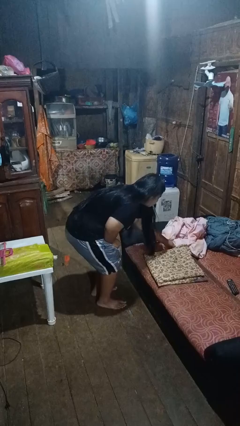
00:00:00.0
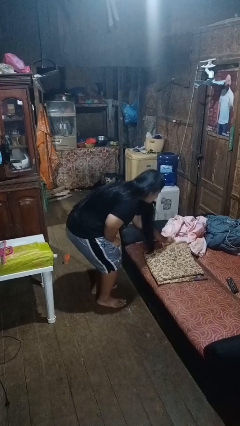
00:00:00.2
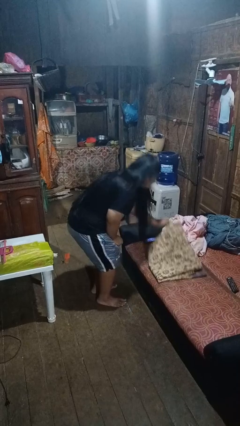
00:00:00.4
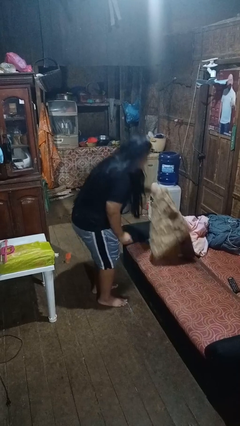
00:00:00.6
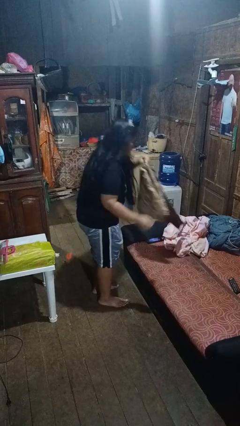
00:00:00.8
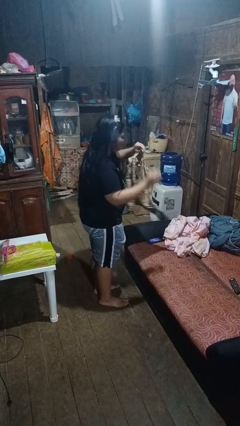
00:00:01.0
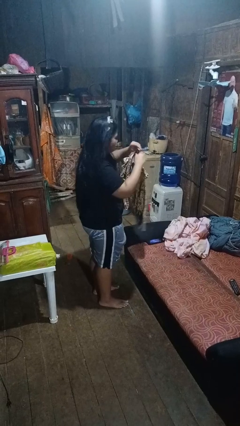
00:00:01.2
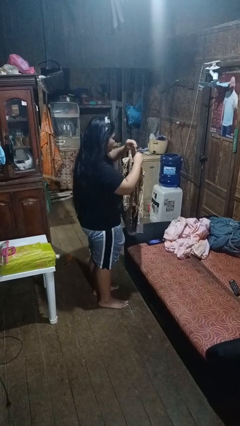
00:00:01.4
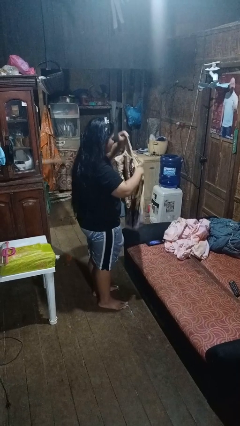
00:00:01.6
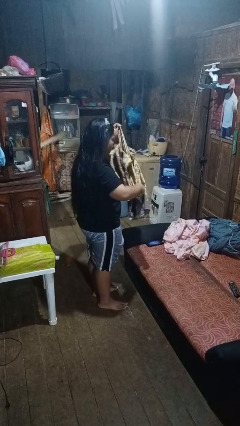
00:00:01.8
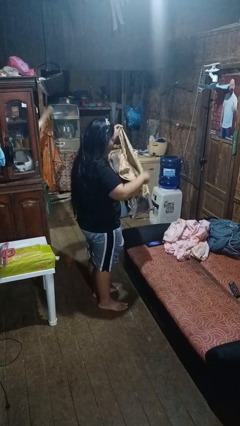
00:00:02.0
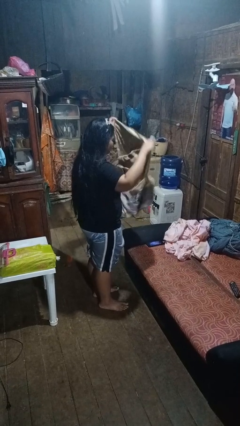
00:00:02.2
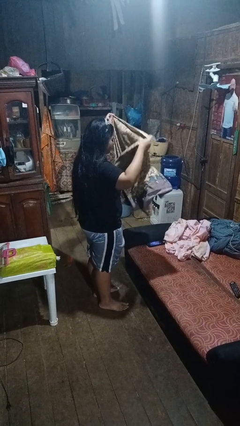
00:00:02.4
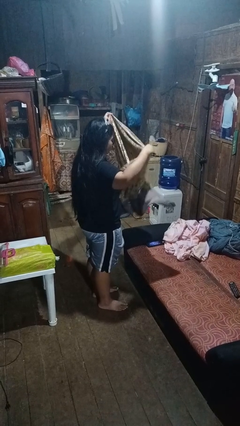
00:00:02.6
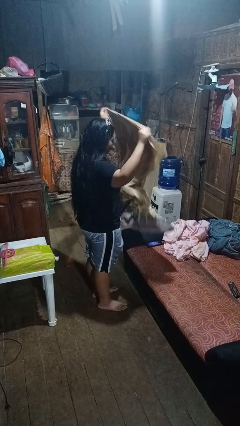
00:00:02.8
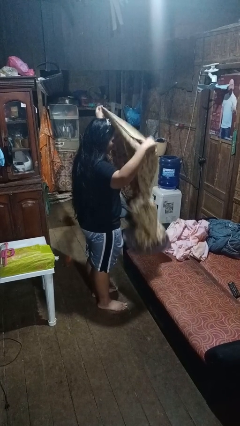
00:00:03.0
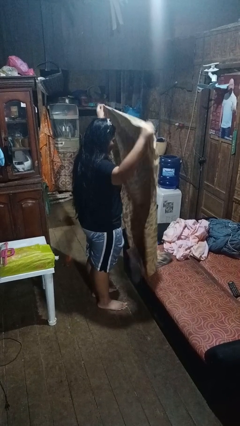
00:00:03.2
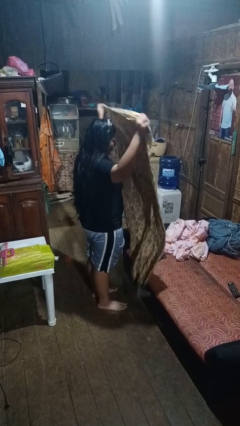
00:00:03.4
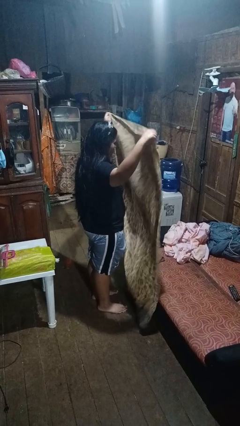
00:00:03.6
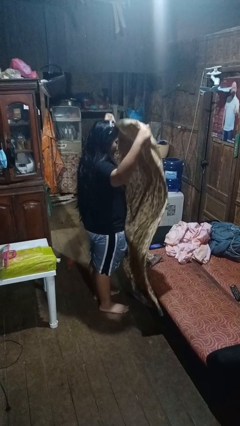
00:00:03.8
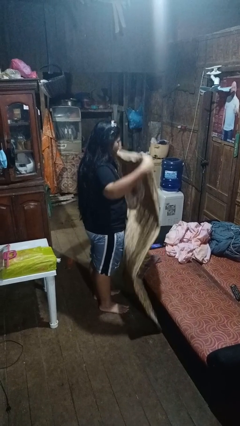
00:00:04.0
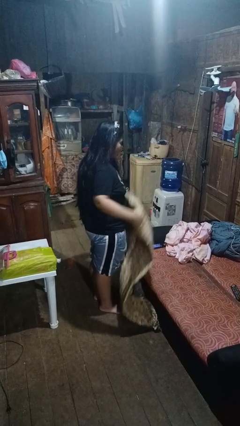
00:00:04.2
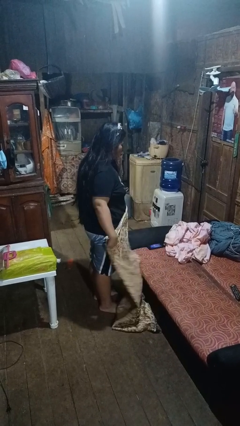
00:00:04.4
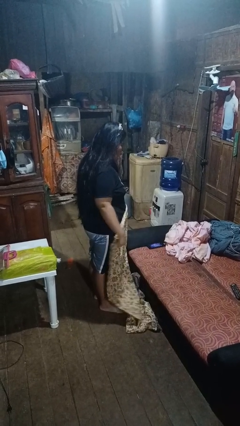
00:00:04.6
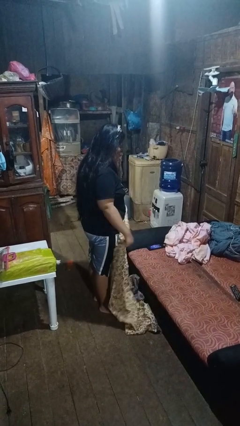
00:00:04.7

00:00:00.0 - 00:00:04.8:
person unfolds blanket

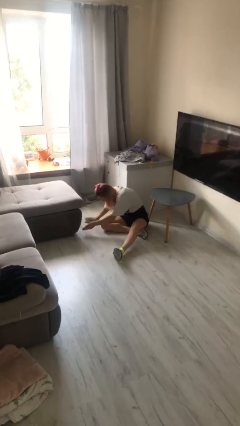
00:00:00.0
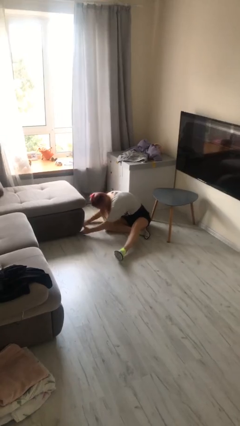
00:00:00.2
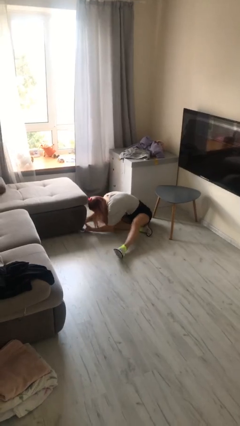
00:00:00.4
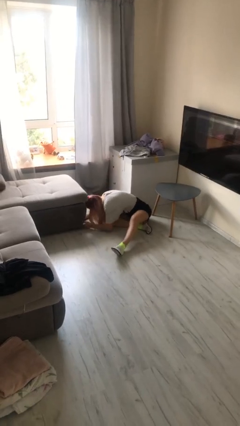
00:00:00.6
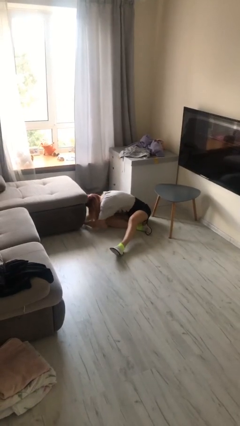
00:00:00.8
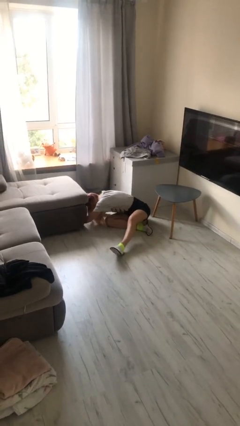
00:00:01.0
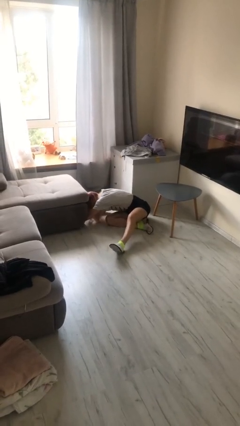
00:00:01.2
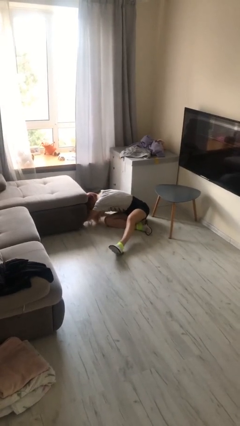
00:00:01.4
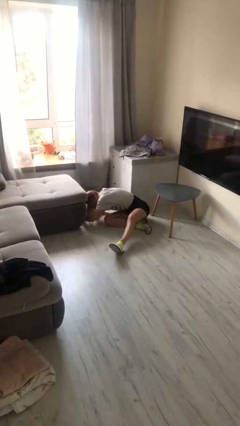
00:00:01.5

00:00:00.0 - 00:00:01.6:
person searches under couch

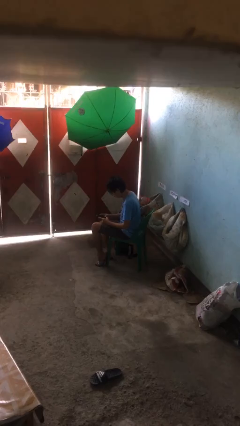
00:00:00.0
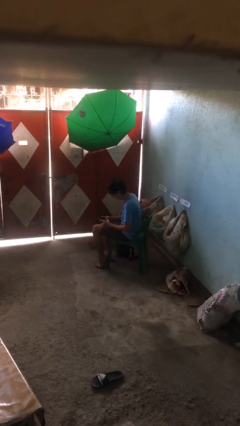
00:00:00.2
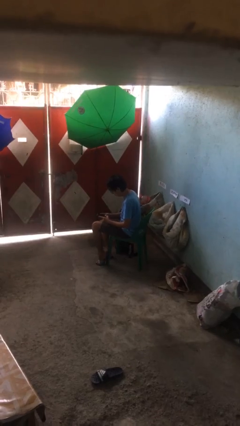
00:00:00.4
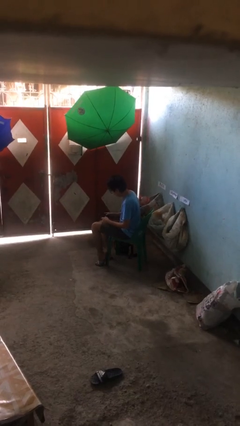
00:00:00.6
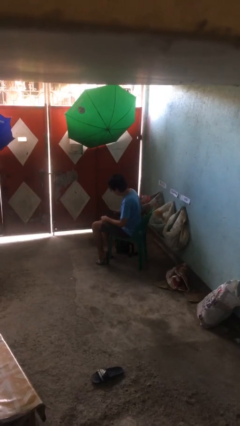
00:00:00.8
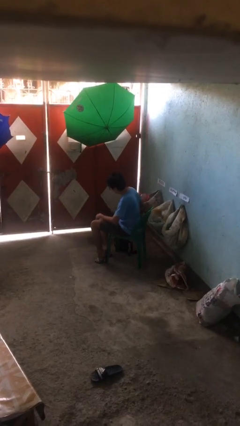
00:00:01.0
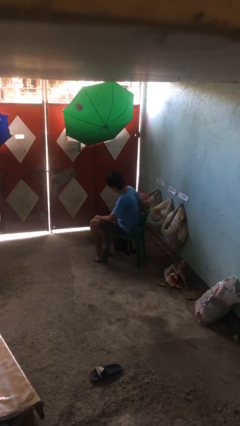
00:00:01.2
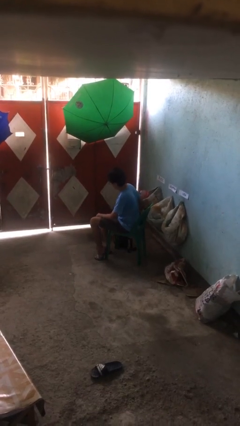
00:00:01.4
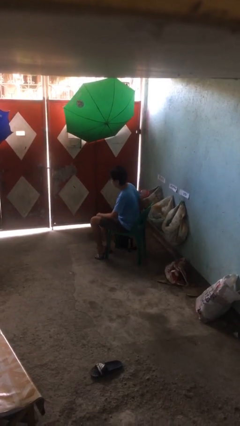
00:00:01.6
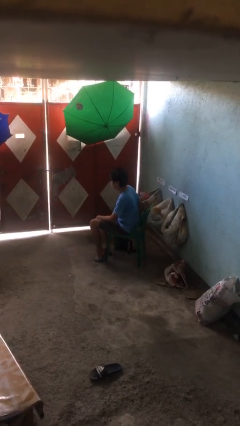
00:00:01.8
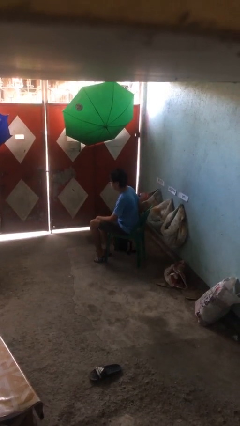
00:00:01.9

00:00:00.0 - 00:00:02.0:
person puts phone into pocket

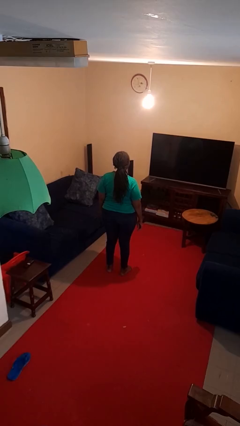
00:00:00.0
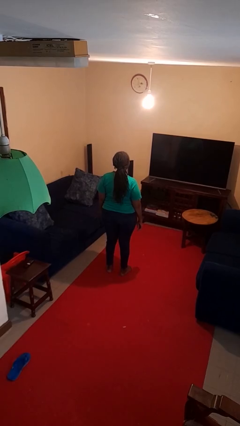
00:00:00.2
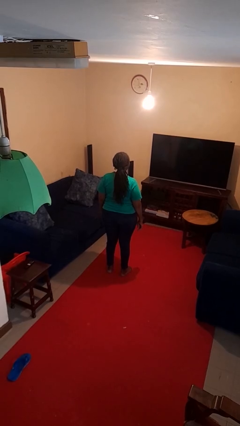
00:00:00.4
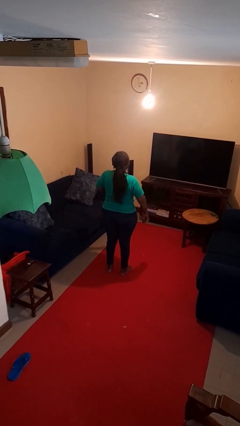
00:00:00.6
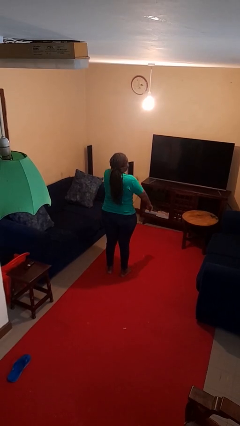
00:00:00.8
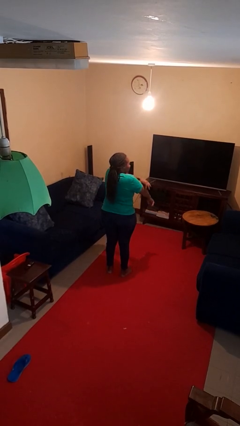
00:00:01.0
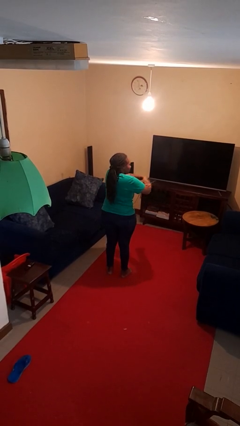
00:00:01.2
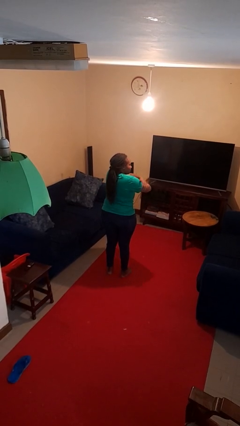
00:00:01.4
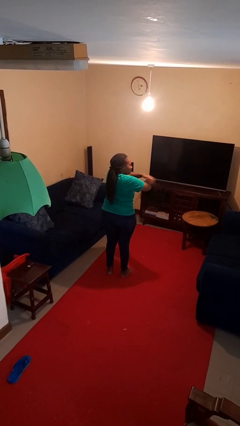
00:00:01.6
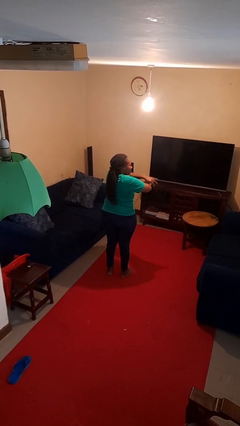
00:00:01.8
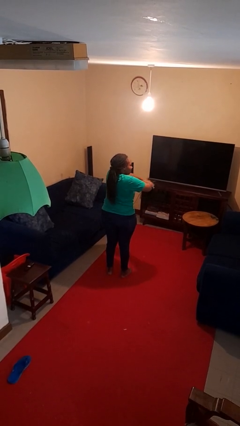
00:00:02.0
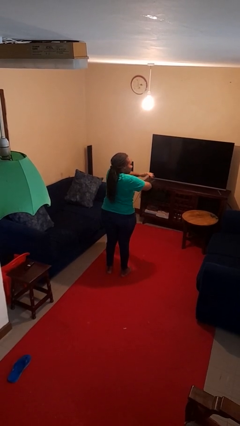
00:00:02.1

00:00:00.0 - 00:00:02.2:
person swats bug

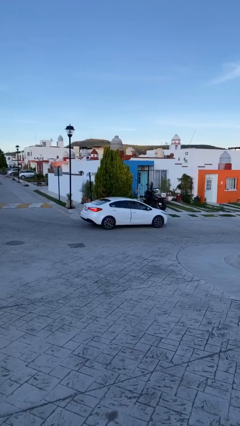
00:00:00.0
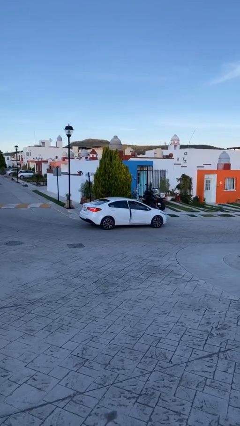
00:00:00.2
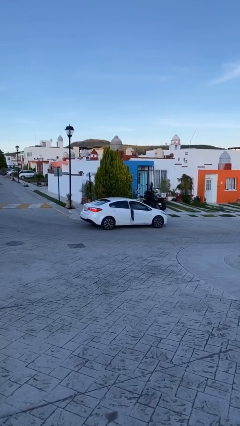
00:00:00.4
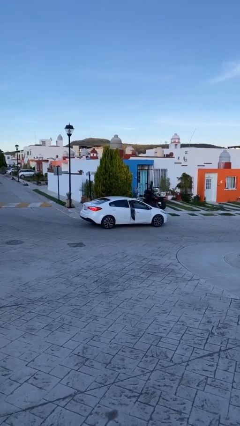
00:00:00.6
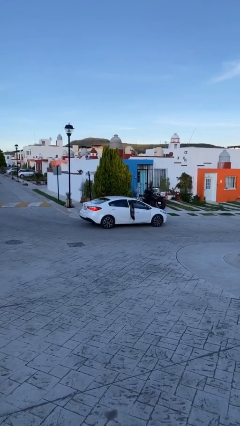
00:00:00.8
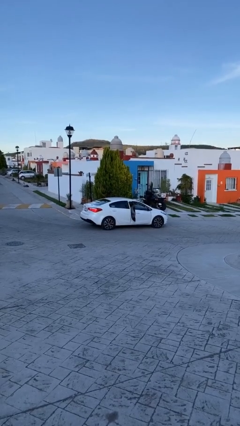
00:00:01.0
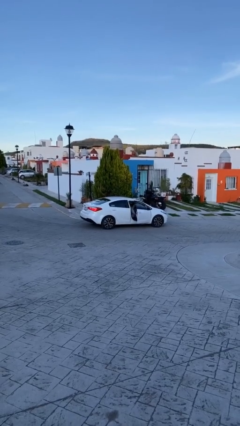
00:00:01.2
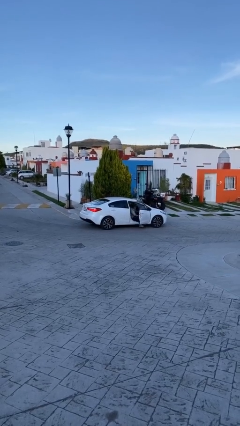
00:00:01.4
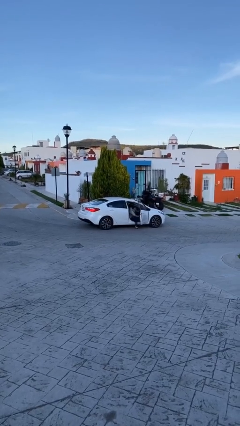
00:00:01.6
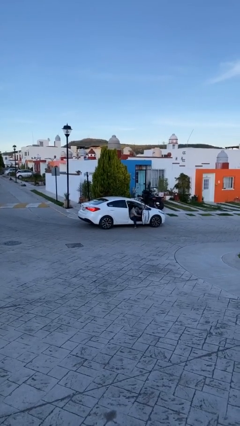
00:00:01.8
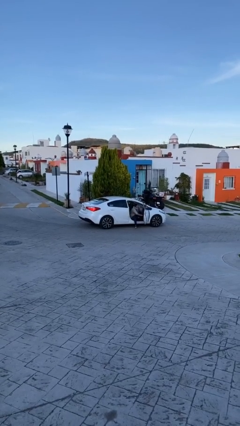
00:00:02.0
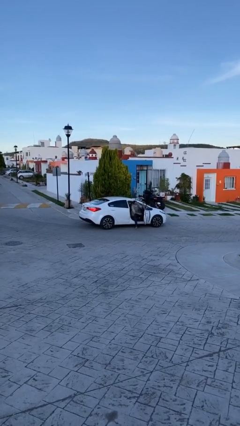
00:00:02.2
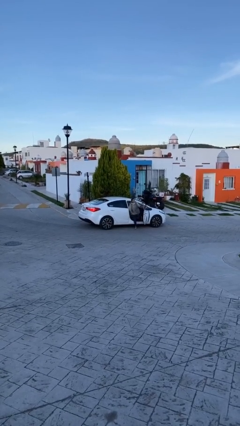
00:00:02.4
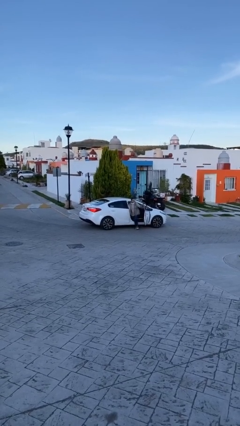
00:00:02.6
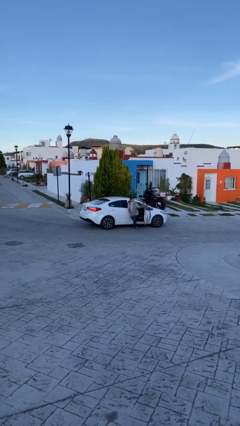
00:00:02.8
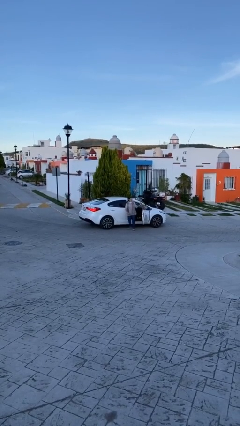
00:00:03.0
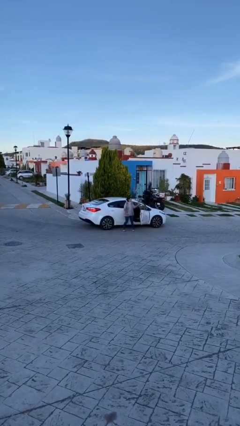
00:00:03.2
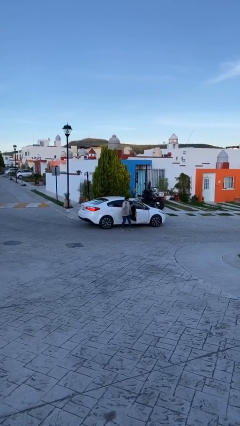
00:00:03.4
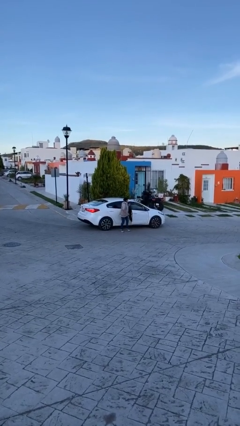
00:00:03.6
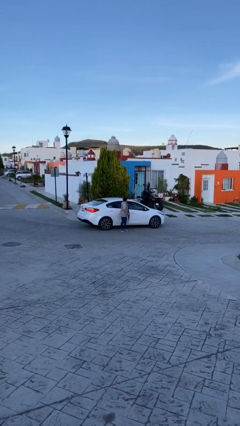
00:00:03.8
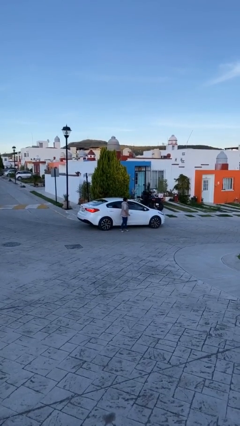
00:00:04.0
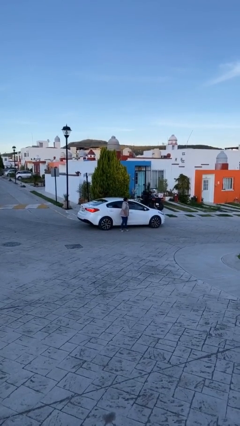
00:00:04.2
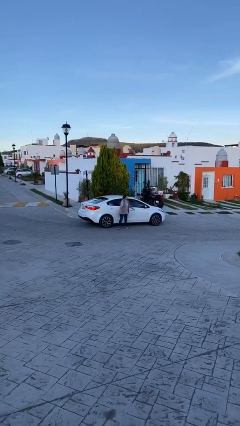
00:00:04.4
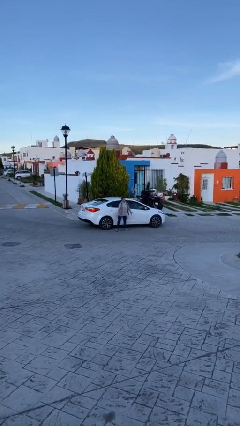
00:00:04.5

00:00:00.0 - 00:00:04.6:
car drops off person

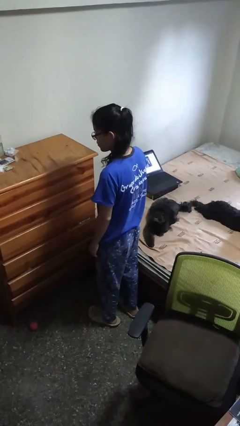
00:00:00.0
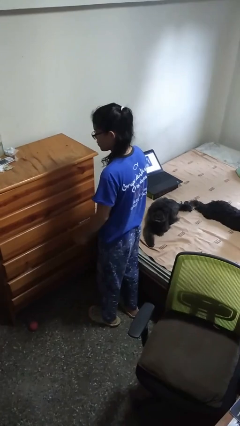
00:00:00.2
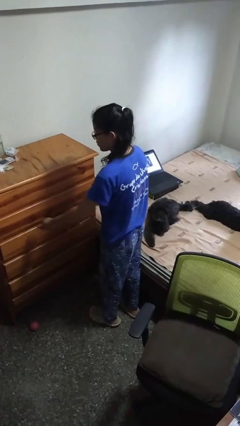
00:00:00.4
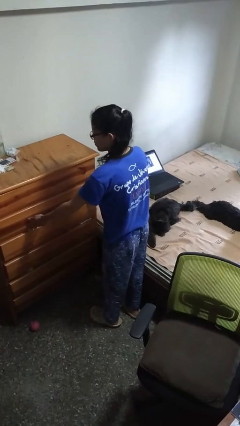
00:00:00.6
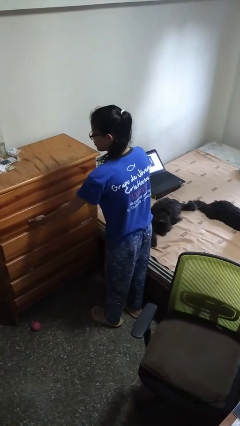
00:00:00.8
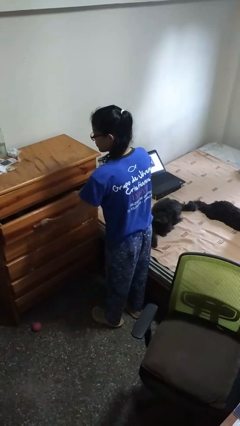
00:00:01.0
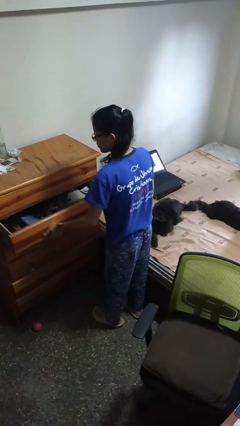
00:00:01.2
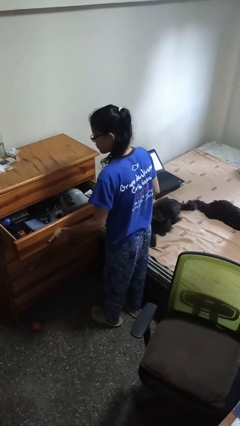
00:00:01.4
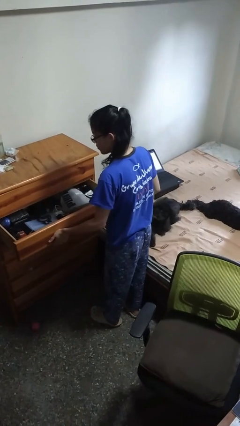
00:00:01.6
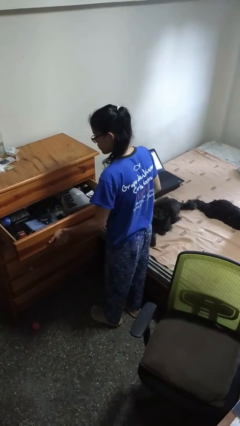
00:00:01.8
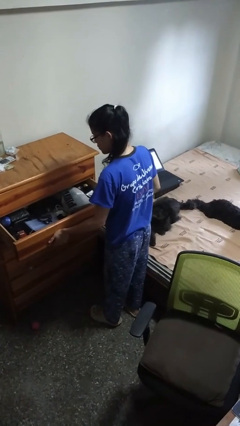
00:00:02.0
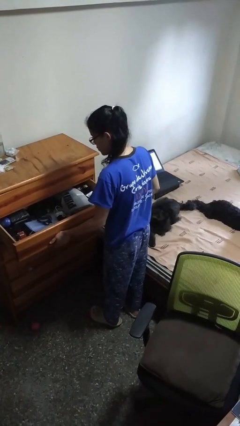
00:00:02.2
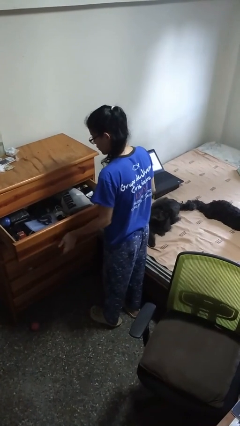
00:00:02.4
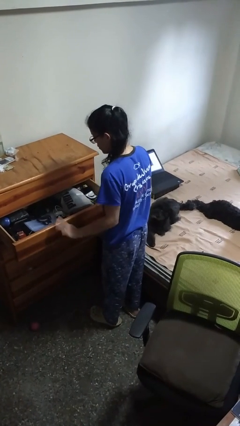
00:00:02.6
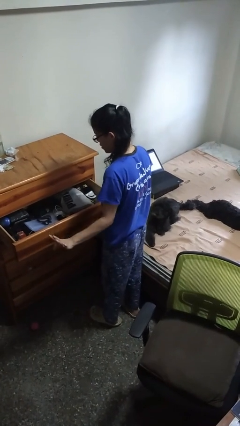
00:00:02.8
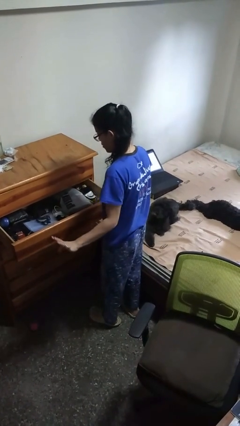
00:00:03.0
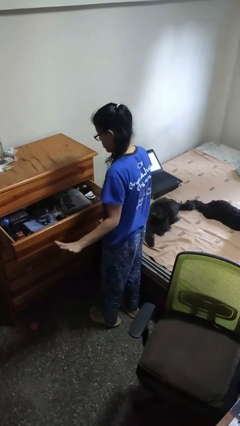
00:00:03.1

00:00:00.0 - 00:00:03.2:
person opens dresser drawer
